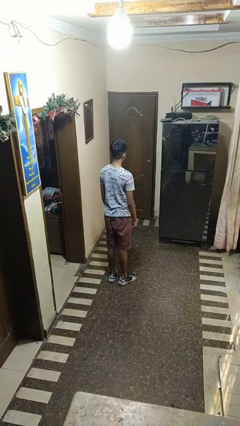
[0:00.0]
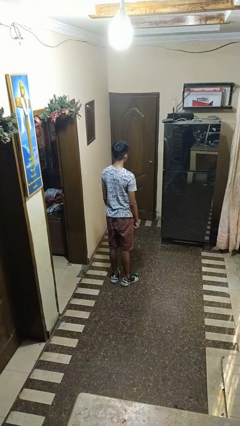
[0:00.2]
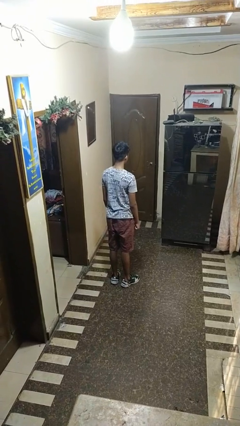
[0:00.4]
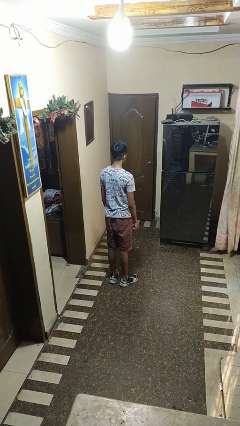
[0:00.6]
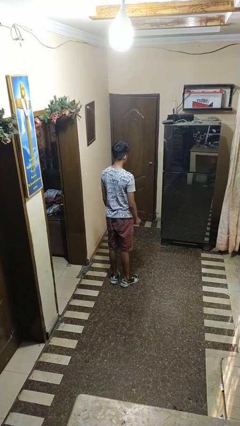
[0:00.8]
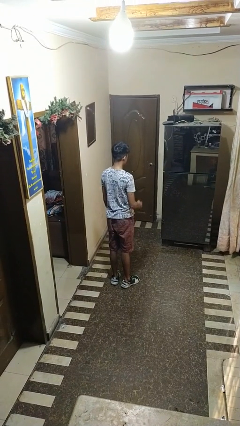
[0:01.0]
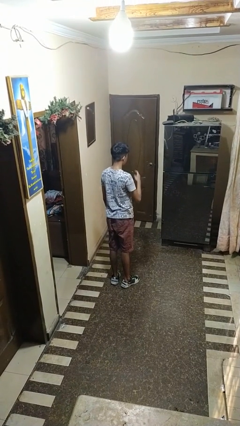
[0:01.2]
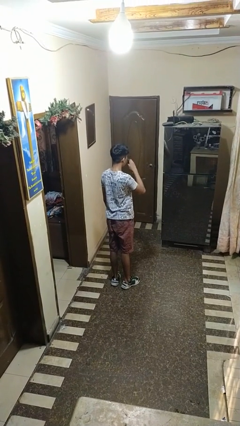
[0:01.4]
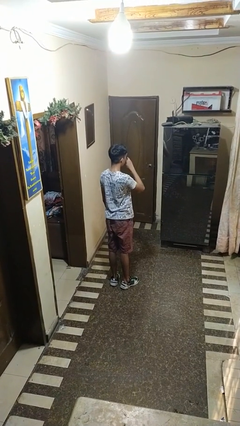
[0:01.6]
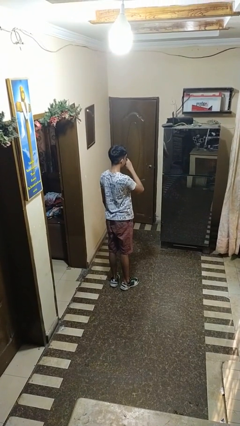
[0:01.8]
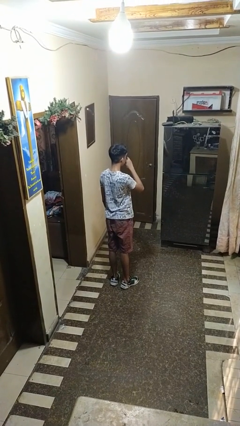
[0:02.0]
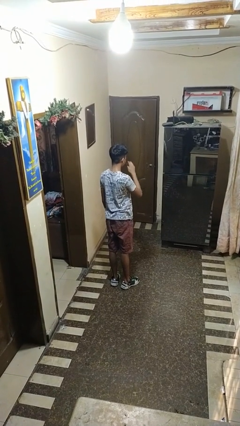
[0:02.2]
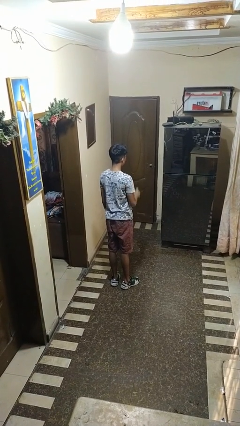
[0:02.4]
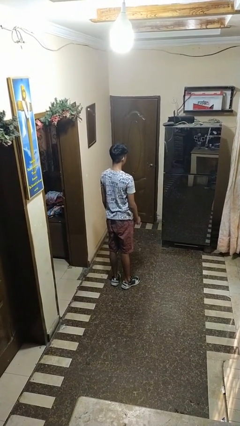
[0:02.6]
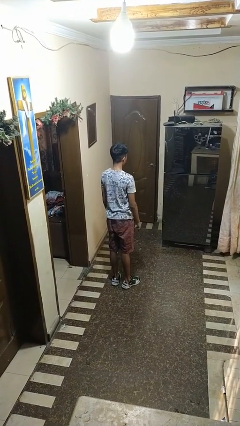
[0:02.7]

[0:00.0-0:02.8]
person vapes

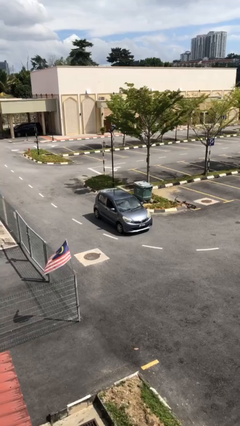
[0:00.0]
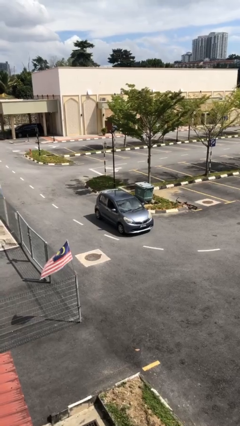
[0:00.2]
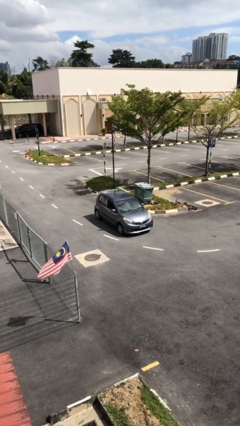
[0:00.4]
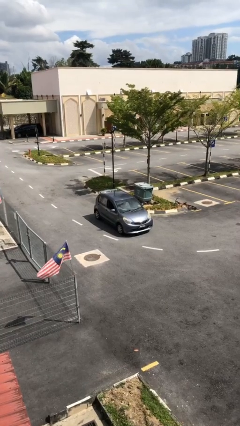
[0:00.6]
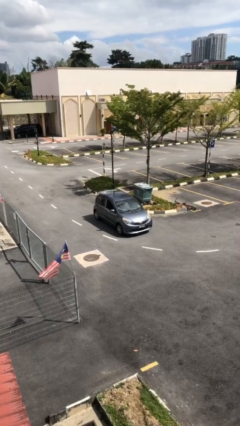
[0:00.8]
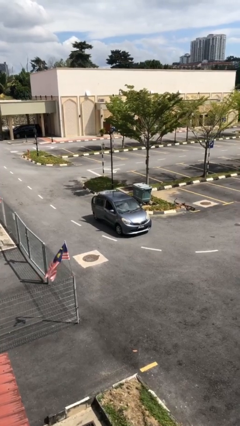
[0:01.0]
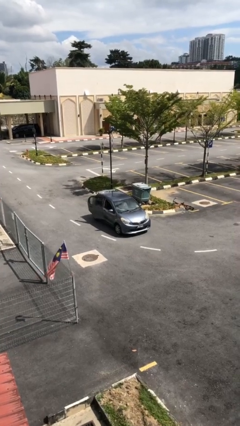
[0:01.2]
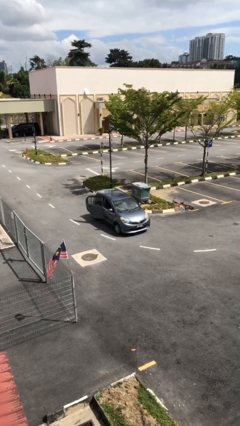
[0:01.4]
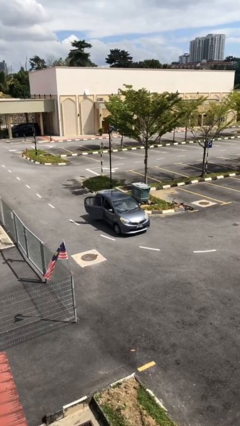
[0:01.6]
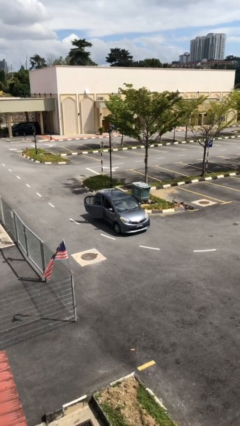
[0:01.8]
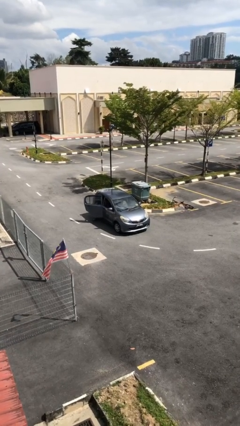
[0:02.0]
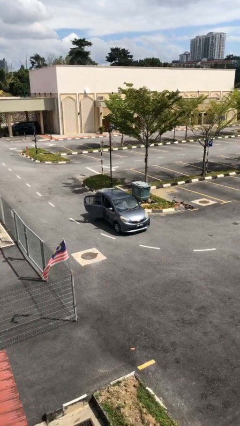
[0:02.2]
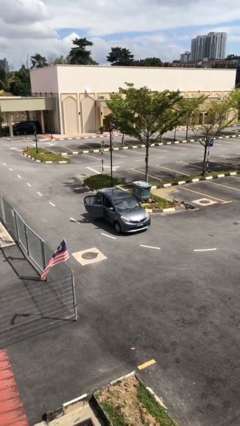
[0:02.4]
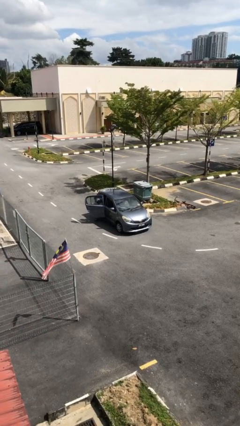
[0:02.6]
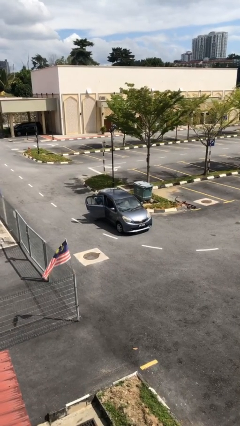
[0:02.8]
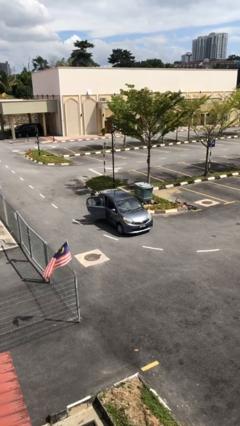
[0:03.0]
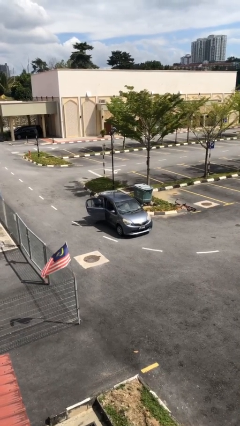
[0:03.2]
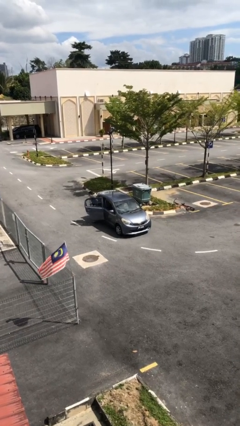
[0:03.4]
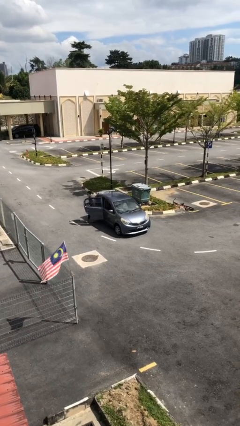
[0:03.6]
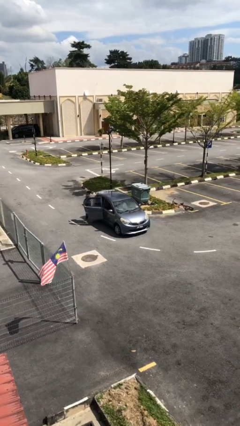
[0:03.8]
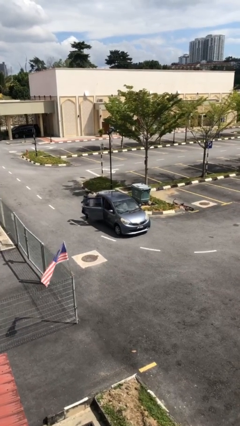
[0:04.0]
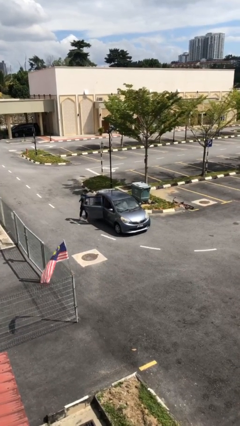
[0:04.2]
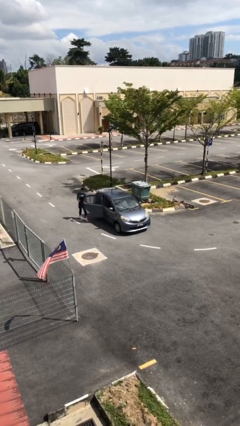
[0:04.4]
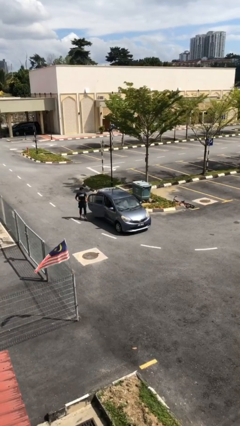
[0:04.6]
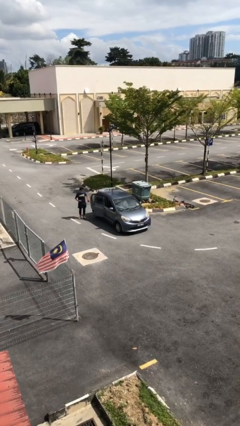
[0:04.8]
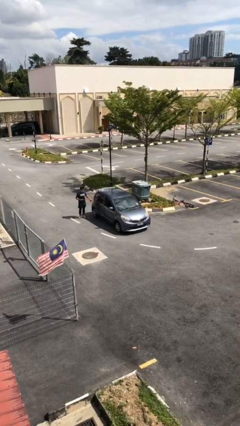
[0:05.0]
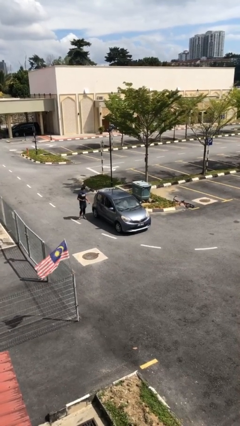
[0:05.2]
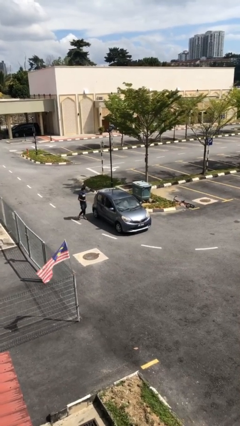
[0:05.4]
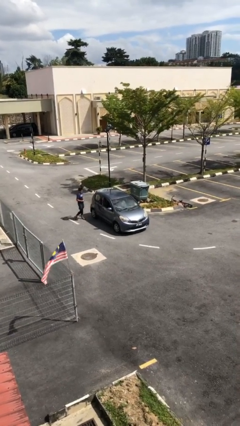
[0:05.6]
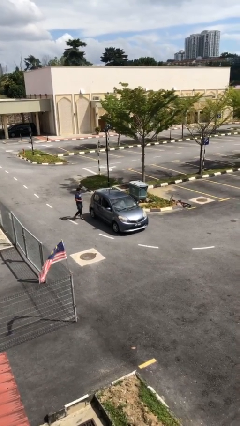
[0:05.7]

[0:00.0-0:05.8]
car drops off person

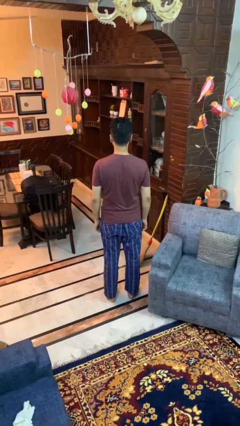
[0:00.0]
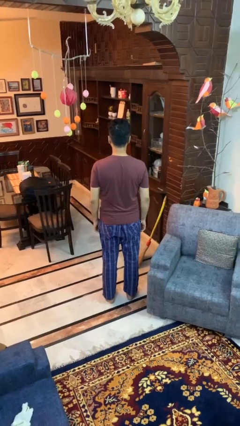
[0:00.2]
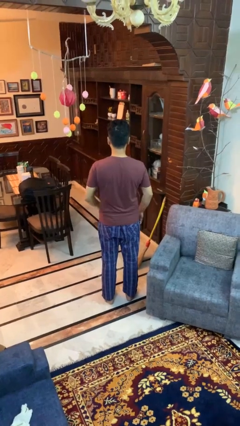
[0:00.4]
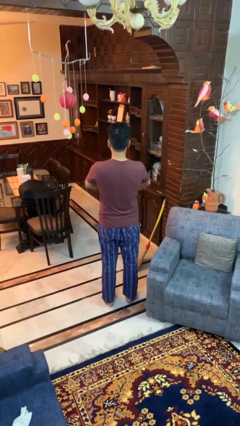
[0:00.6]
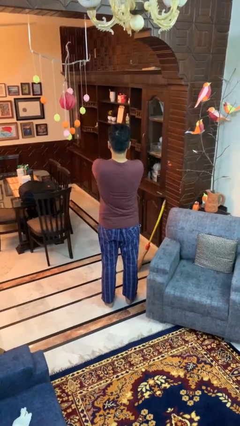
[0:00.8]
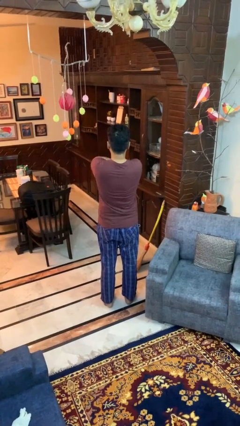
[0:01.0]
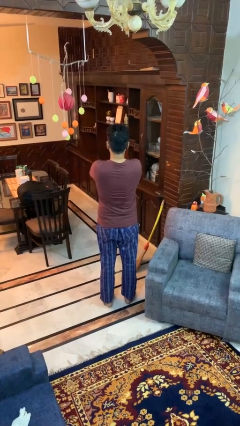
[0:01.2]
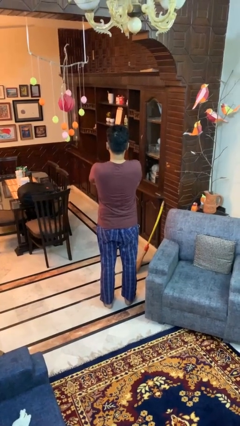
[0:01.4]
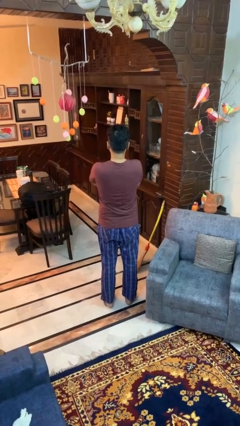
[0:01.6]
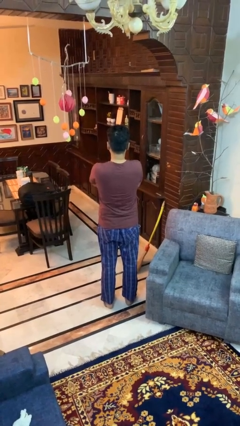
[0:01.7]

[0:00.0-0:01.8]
person crosses arms

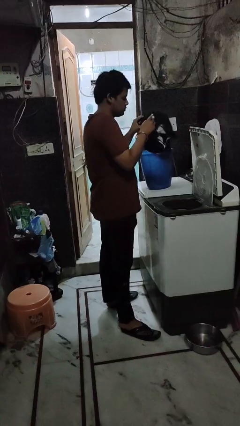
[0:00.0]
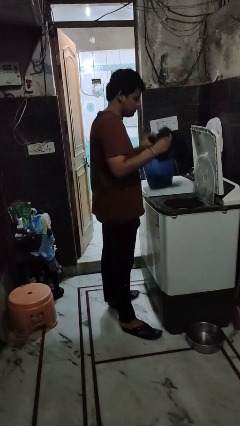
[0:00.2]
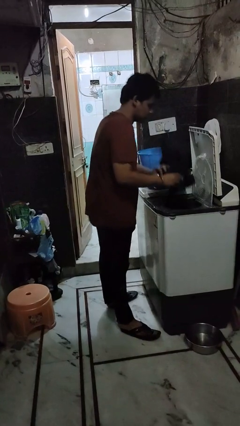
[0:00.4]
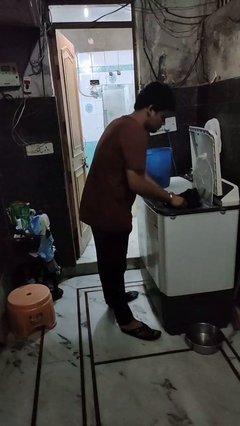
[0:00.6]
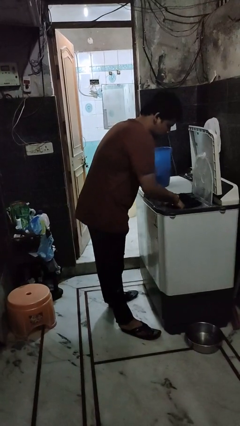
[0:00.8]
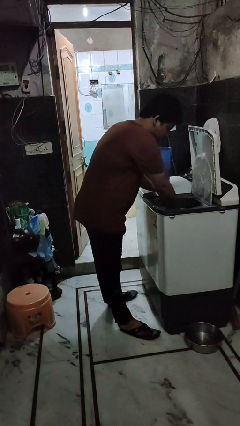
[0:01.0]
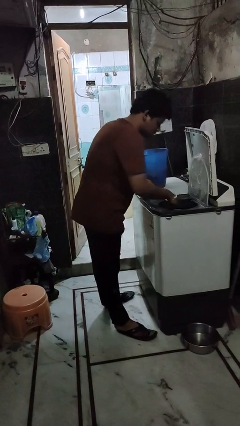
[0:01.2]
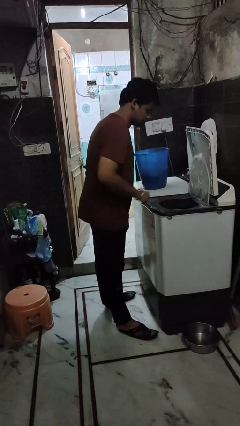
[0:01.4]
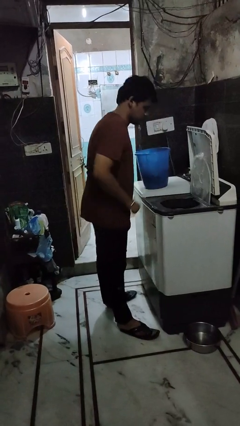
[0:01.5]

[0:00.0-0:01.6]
person loads dryer

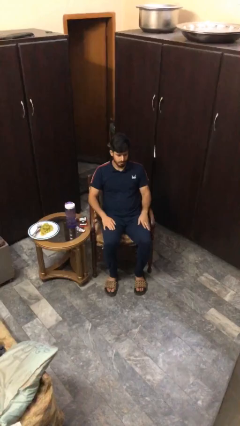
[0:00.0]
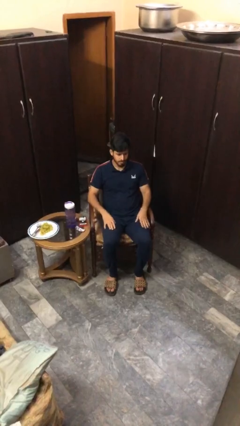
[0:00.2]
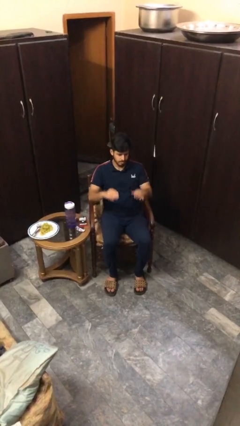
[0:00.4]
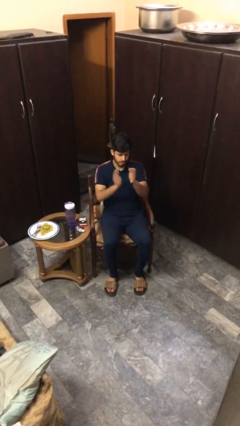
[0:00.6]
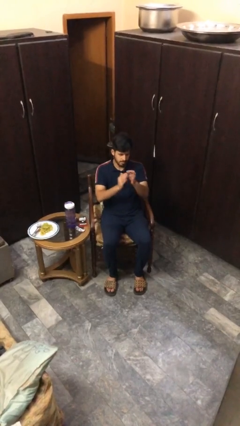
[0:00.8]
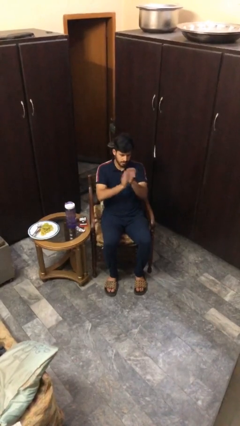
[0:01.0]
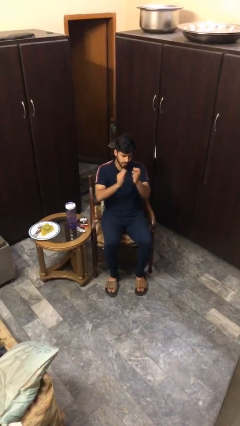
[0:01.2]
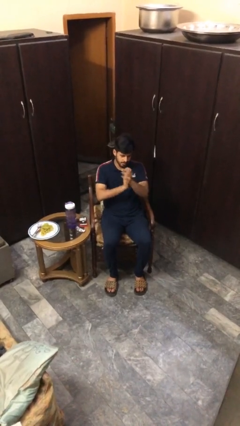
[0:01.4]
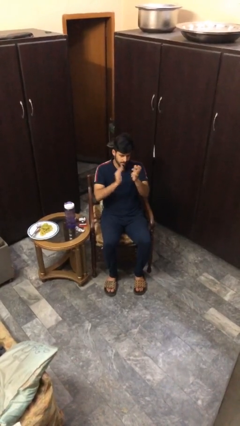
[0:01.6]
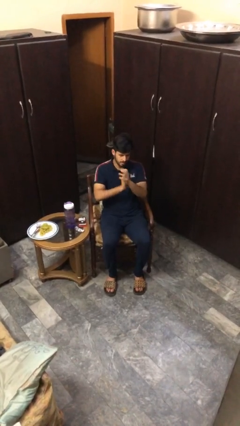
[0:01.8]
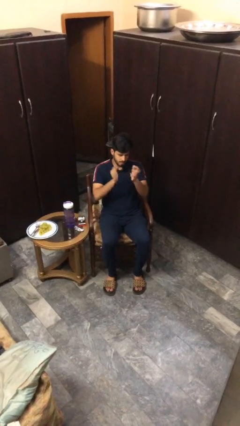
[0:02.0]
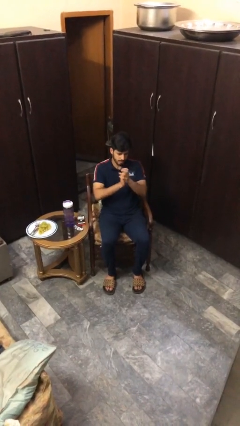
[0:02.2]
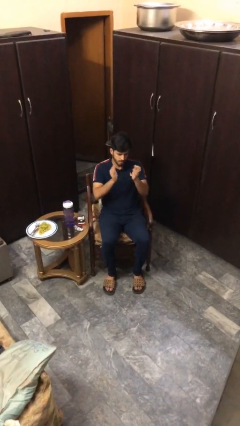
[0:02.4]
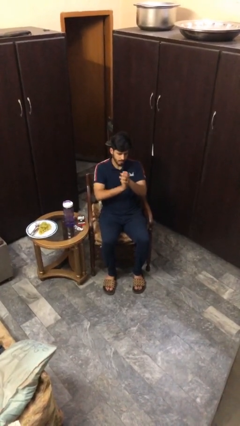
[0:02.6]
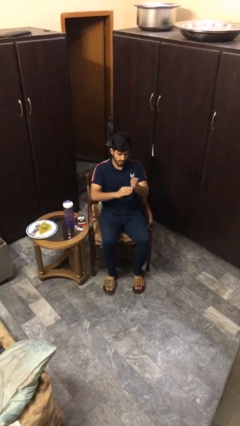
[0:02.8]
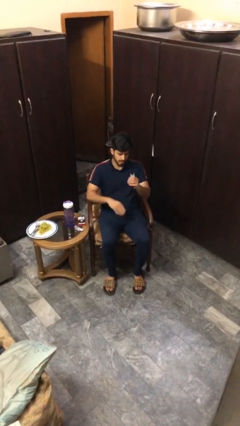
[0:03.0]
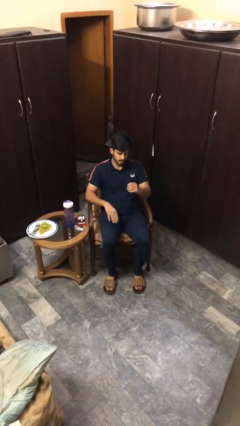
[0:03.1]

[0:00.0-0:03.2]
person claps hands

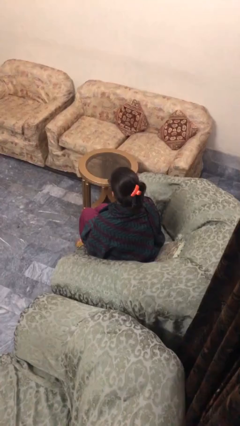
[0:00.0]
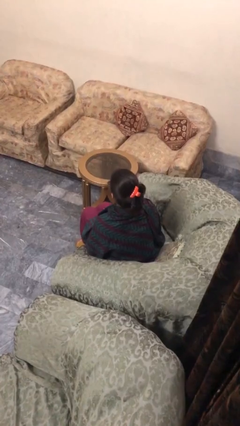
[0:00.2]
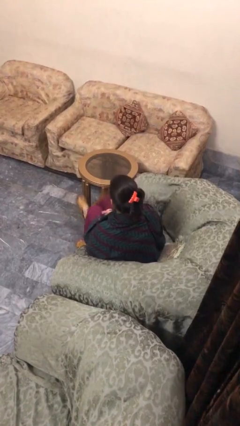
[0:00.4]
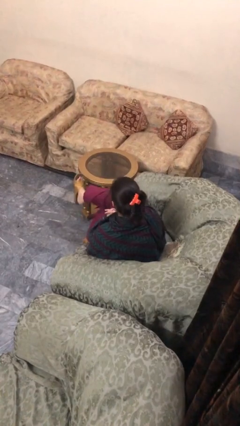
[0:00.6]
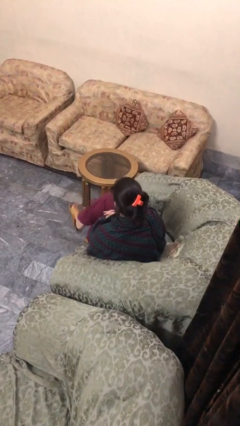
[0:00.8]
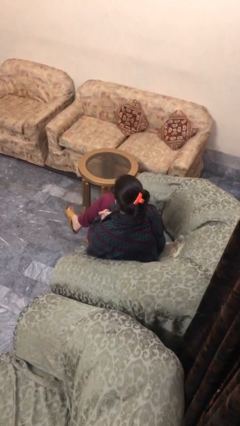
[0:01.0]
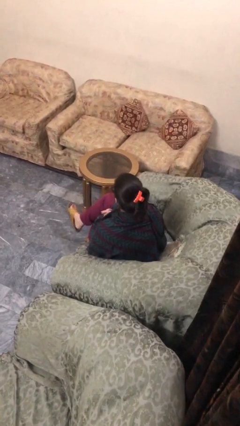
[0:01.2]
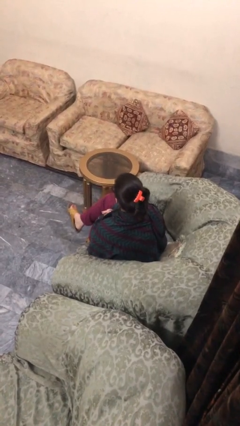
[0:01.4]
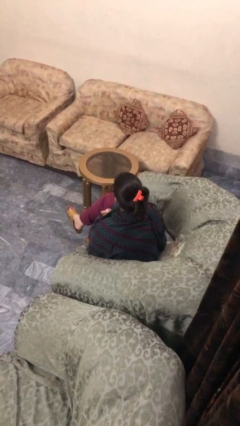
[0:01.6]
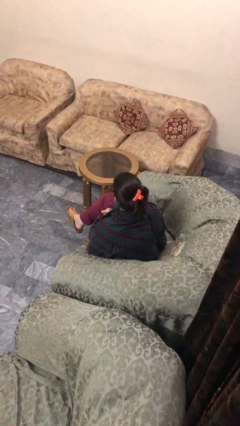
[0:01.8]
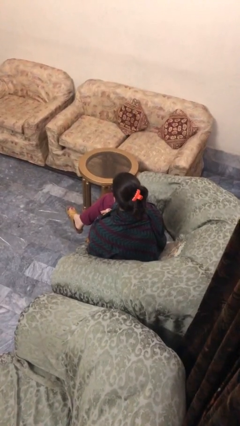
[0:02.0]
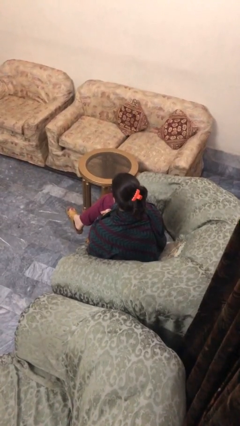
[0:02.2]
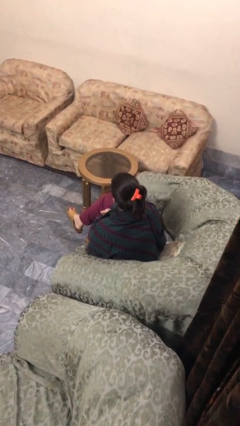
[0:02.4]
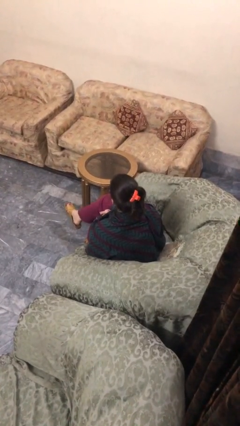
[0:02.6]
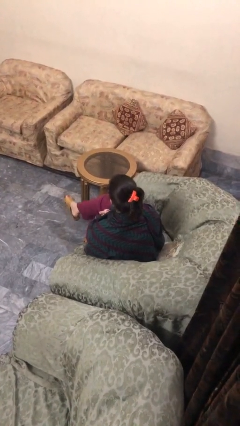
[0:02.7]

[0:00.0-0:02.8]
person crosses legs
